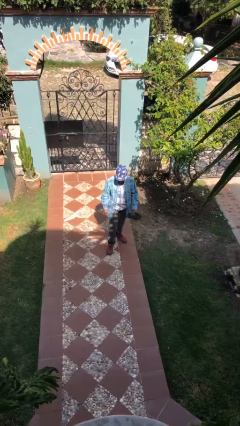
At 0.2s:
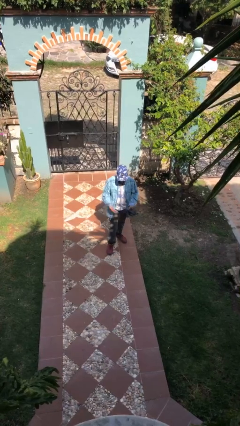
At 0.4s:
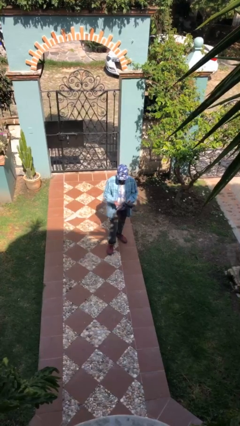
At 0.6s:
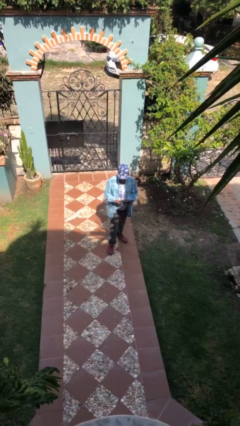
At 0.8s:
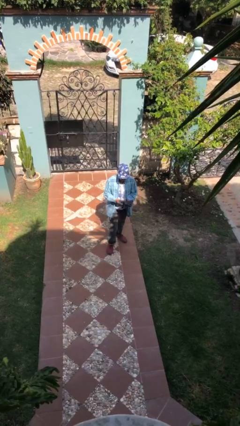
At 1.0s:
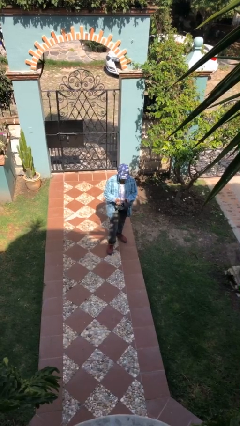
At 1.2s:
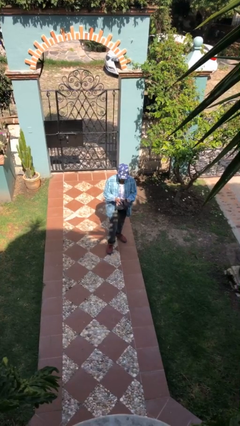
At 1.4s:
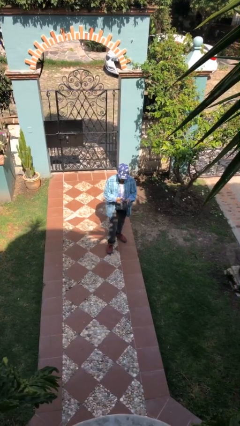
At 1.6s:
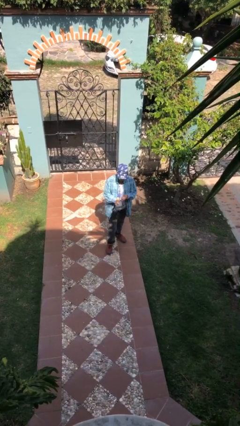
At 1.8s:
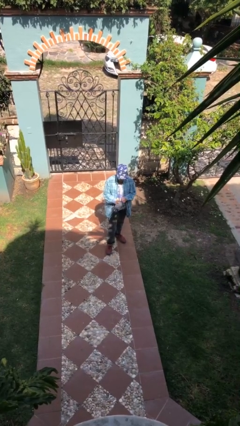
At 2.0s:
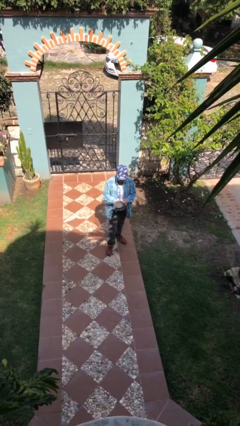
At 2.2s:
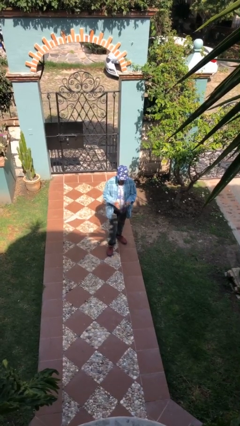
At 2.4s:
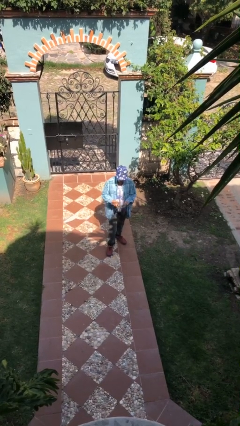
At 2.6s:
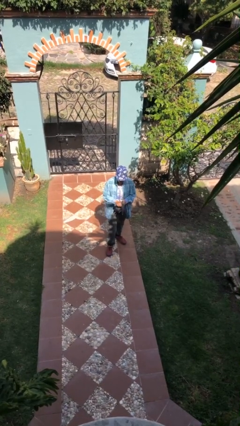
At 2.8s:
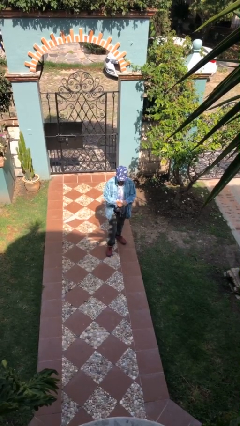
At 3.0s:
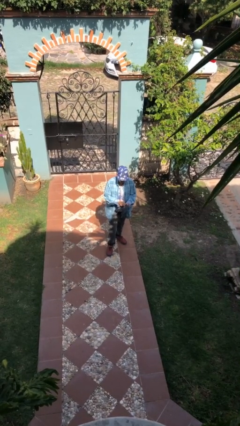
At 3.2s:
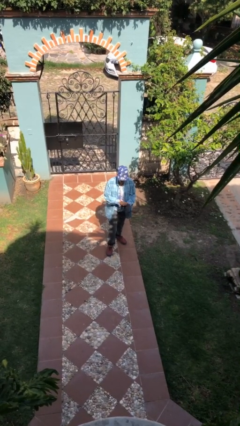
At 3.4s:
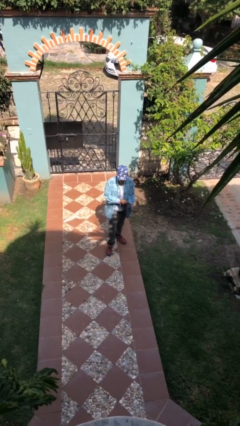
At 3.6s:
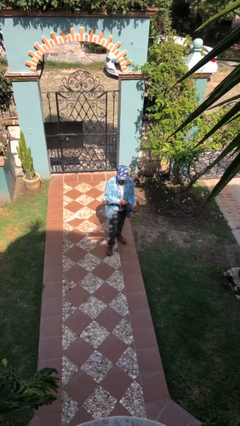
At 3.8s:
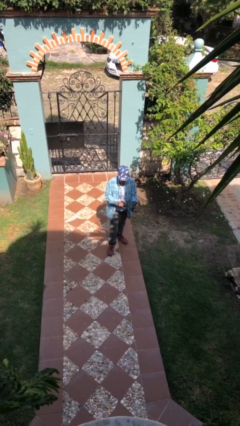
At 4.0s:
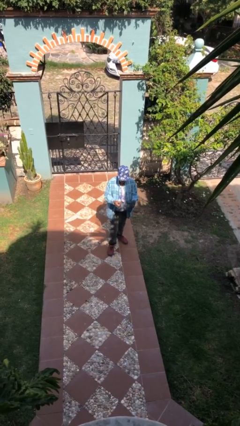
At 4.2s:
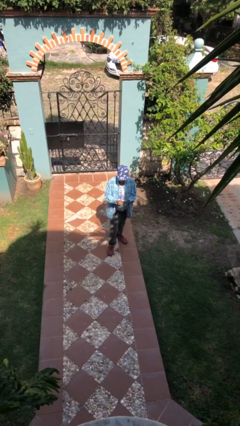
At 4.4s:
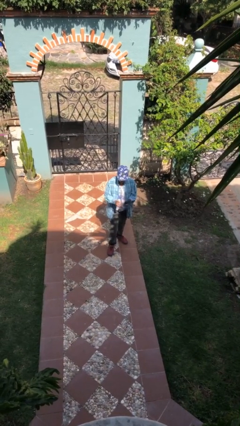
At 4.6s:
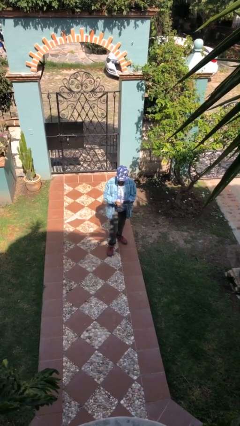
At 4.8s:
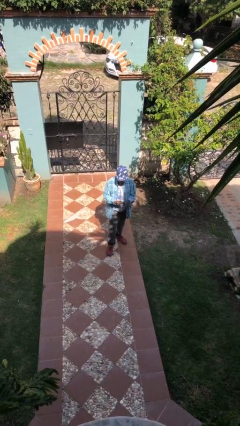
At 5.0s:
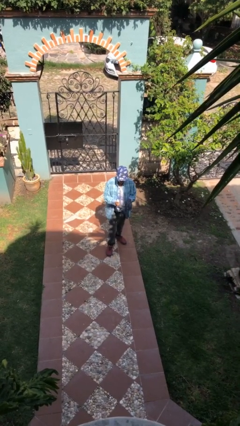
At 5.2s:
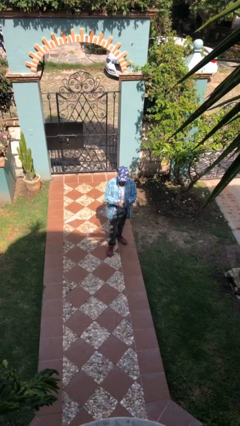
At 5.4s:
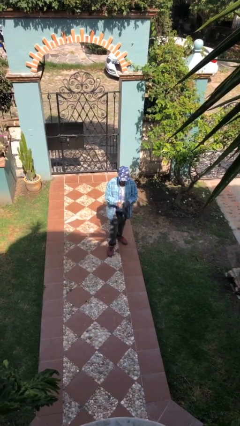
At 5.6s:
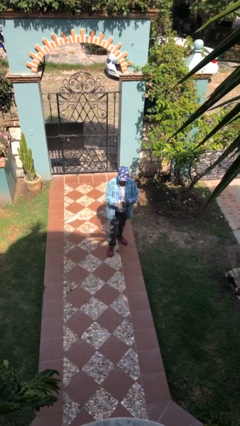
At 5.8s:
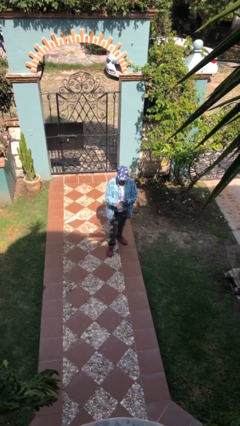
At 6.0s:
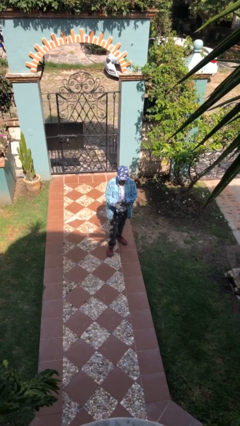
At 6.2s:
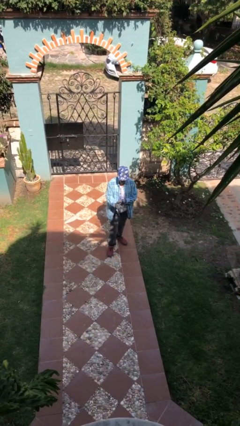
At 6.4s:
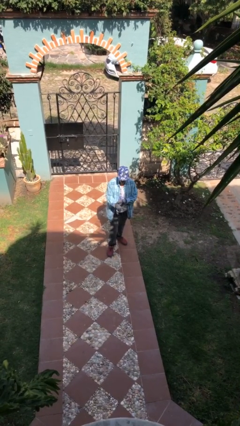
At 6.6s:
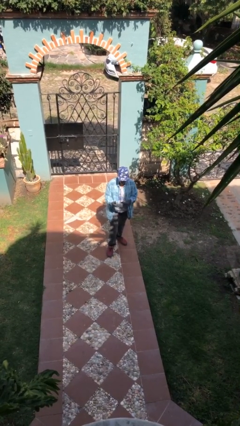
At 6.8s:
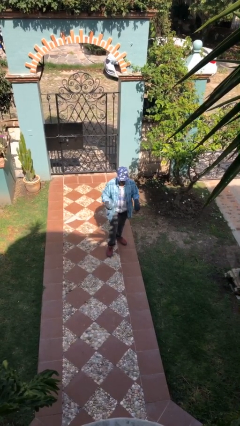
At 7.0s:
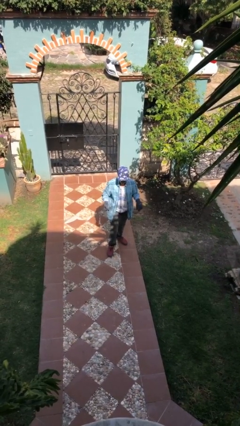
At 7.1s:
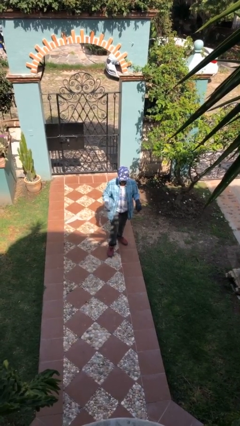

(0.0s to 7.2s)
person puts on gloves

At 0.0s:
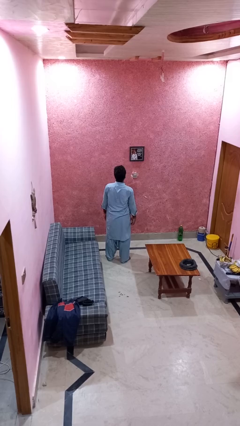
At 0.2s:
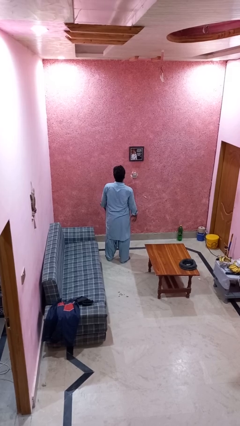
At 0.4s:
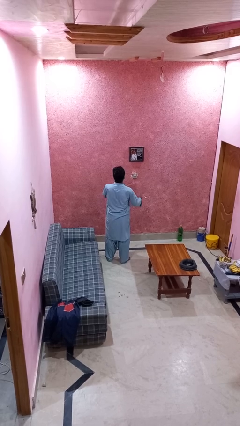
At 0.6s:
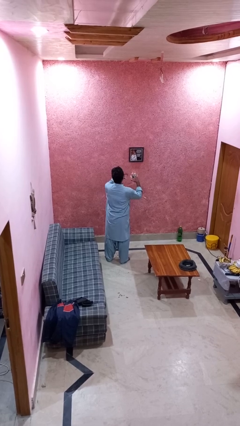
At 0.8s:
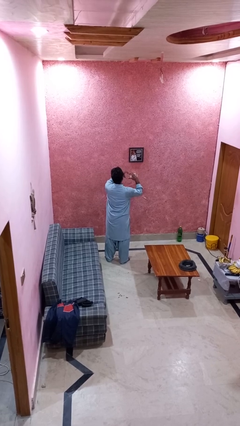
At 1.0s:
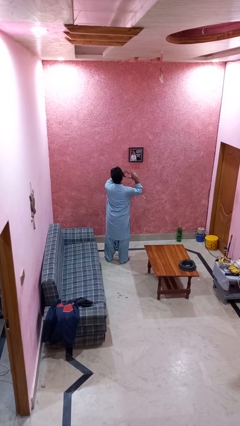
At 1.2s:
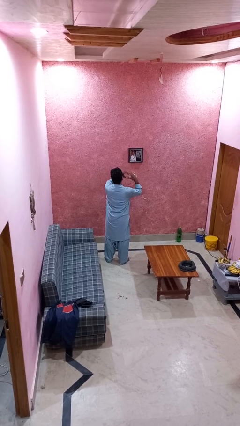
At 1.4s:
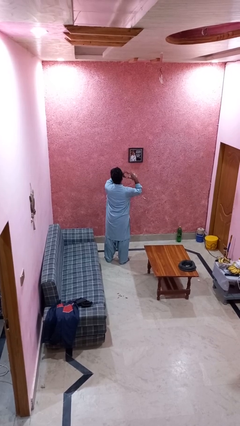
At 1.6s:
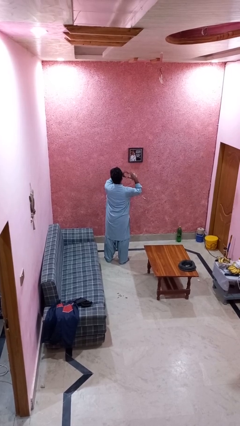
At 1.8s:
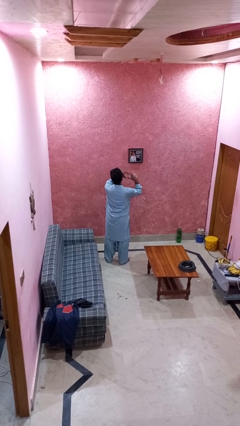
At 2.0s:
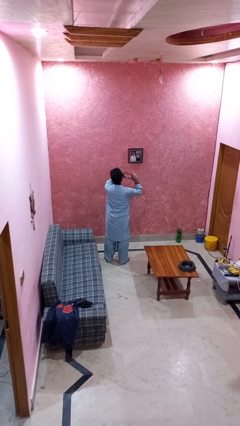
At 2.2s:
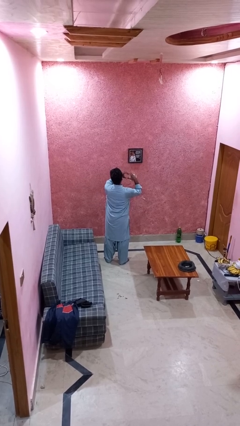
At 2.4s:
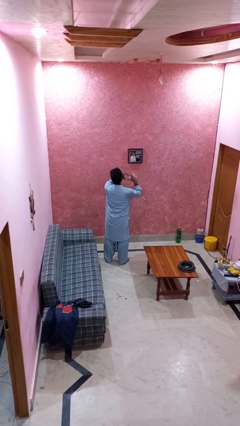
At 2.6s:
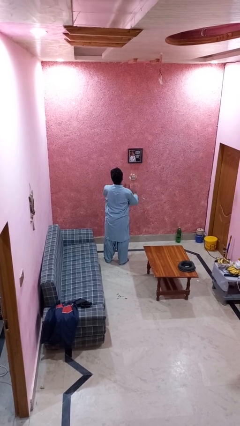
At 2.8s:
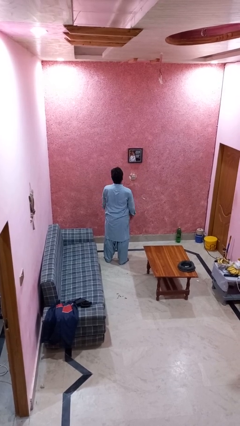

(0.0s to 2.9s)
person gestures heart

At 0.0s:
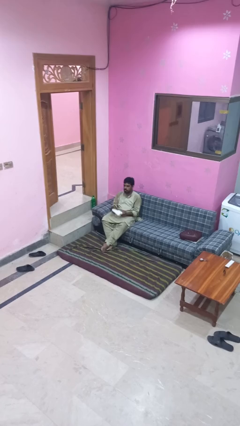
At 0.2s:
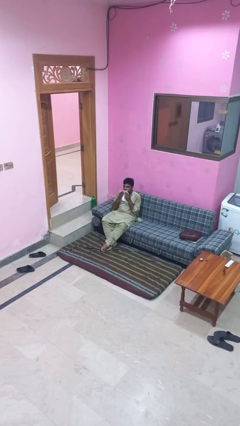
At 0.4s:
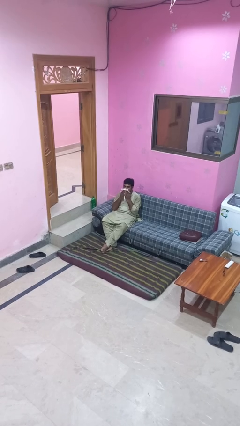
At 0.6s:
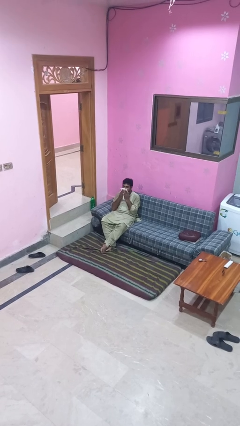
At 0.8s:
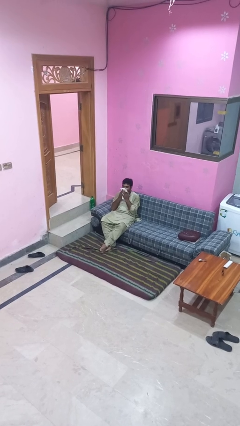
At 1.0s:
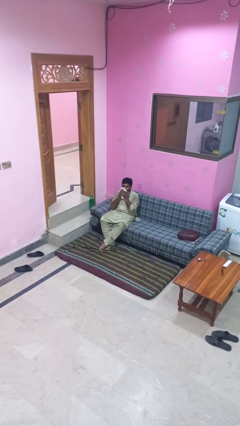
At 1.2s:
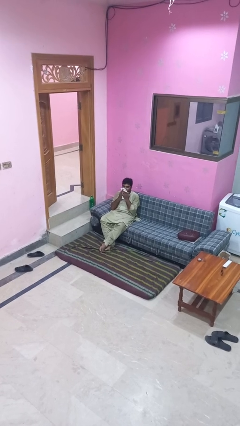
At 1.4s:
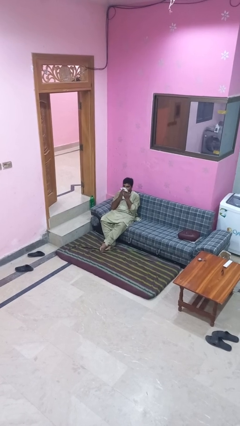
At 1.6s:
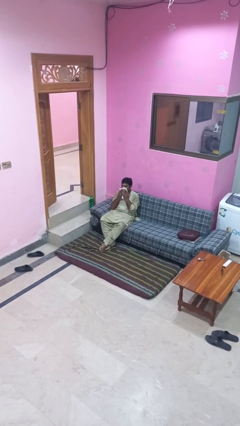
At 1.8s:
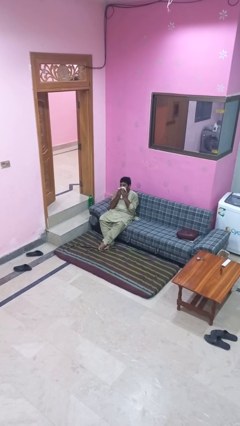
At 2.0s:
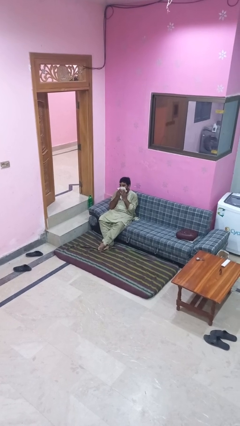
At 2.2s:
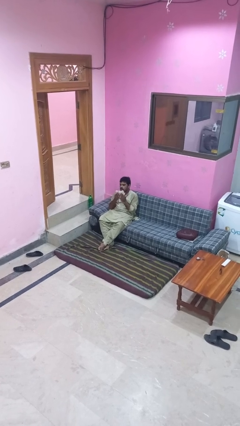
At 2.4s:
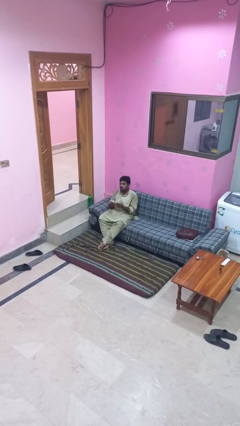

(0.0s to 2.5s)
person wipes mouth with napkin

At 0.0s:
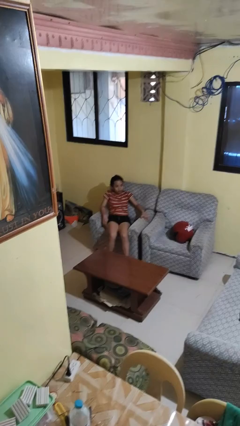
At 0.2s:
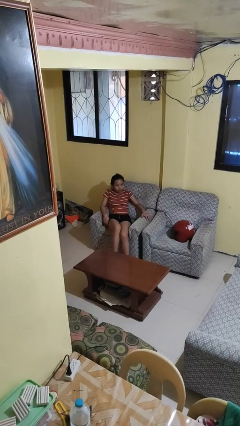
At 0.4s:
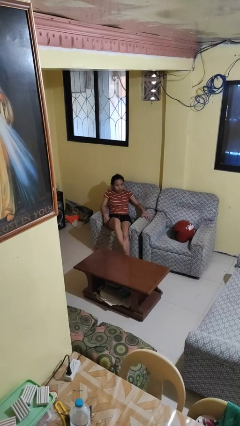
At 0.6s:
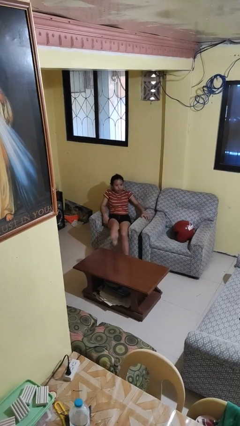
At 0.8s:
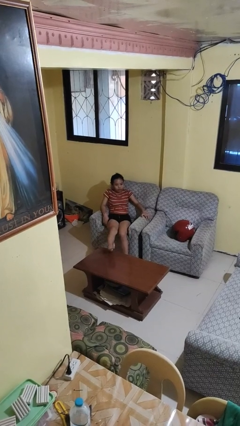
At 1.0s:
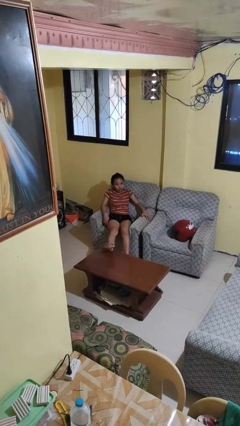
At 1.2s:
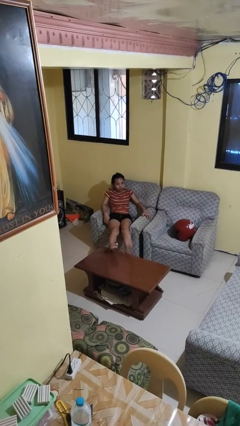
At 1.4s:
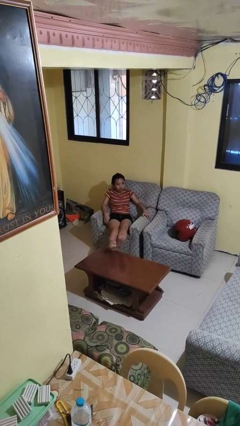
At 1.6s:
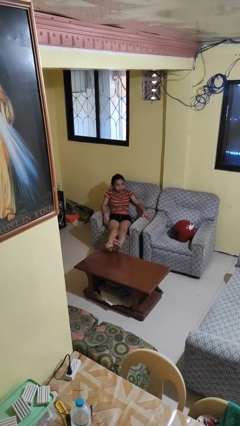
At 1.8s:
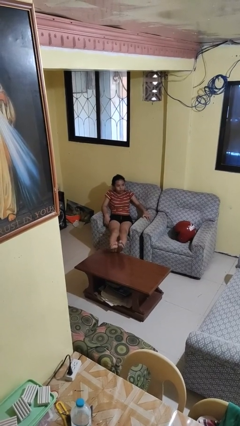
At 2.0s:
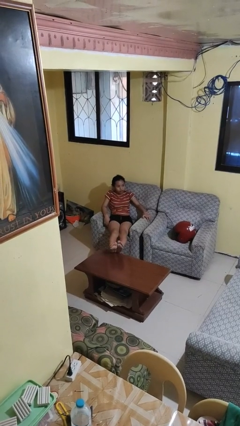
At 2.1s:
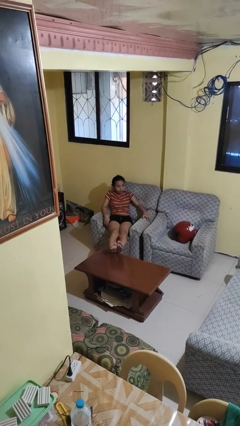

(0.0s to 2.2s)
person puts feet up

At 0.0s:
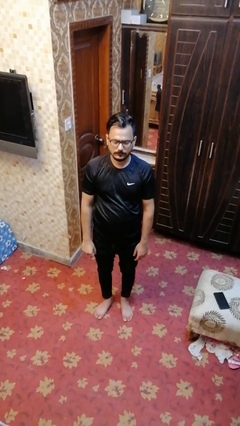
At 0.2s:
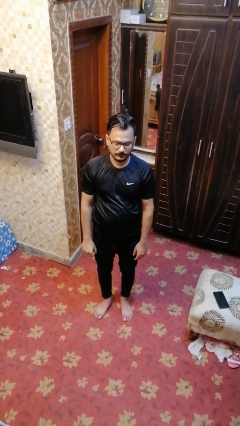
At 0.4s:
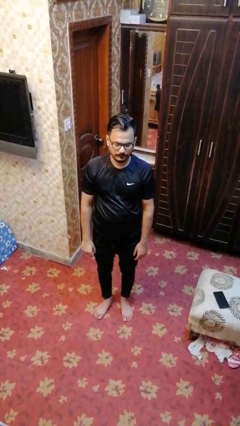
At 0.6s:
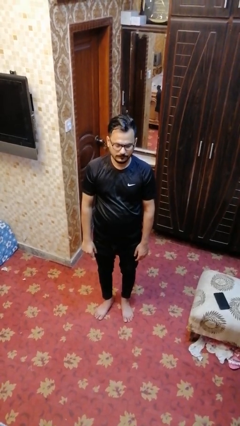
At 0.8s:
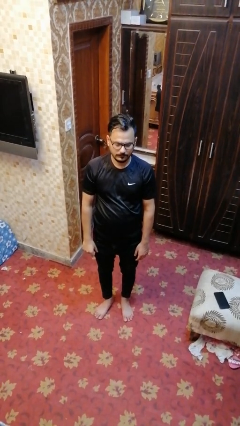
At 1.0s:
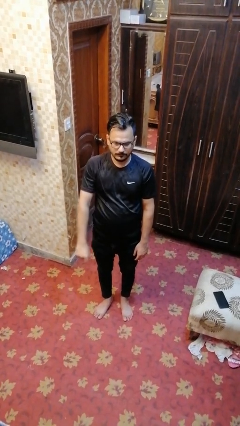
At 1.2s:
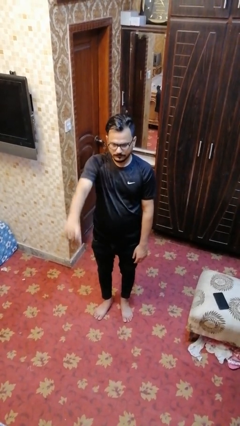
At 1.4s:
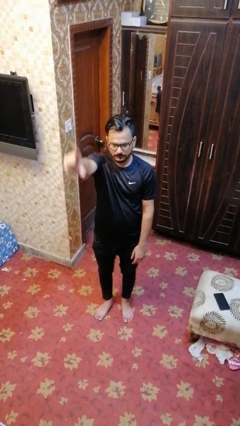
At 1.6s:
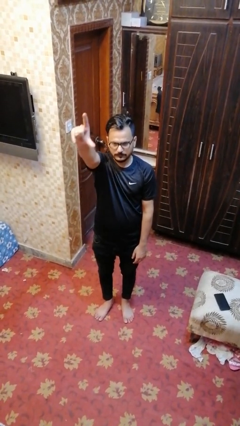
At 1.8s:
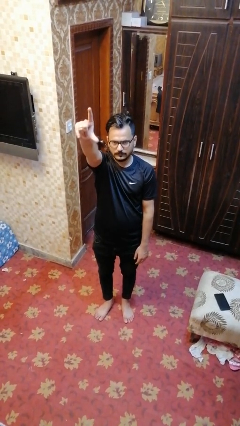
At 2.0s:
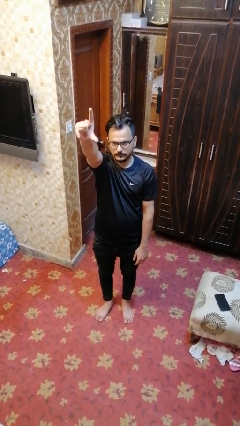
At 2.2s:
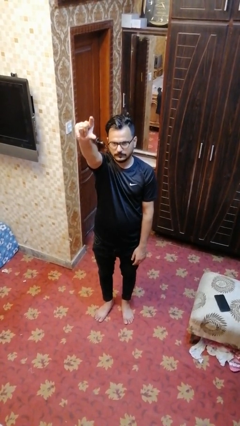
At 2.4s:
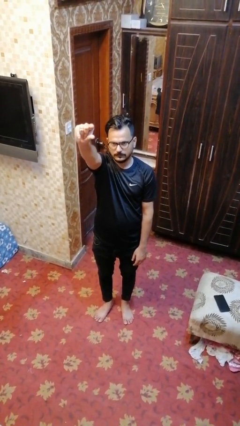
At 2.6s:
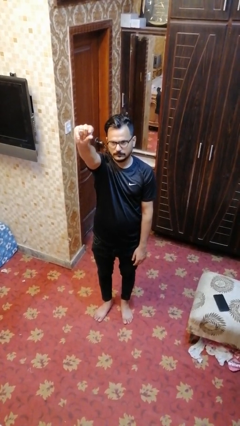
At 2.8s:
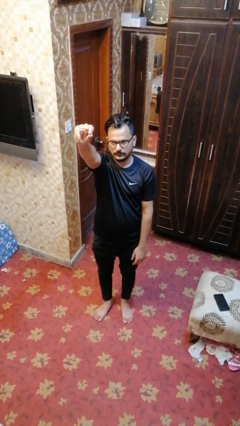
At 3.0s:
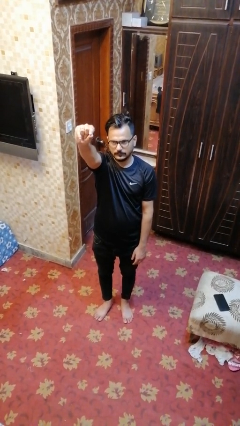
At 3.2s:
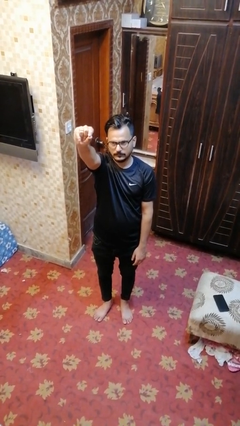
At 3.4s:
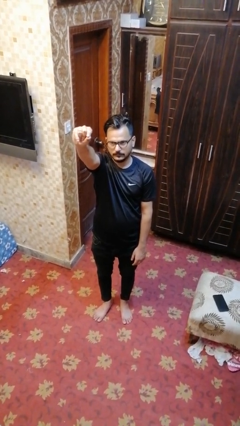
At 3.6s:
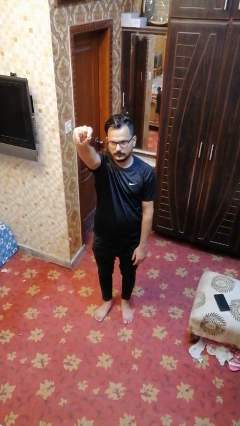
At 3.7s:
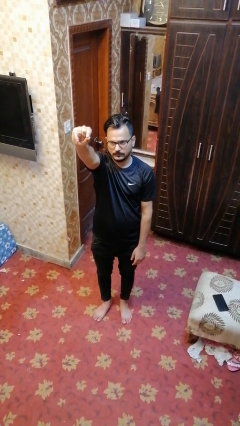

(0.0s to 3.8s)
person gestures zoom in
